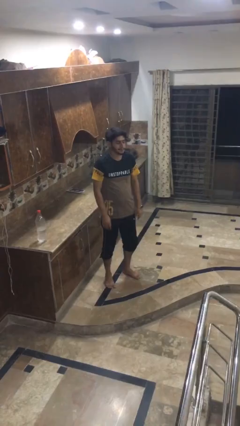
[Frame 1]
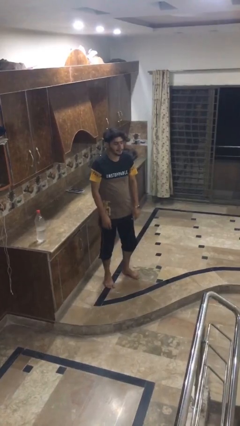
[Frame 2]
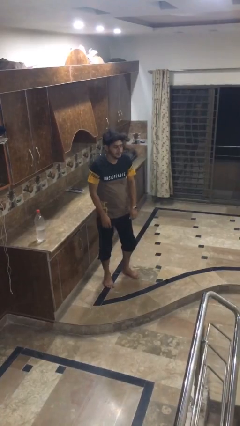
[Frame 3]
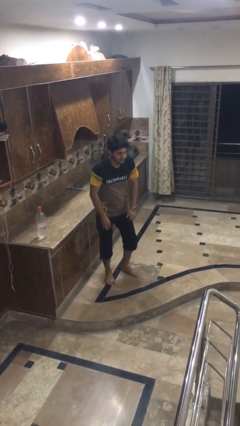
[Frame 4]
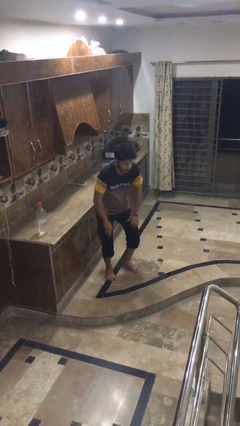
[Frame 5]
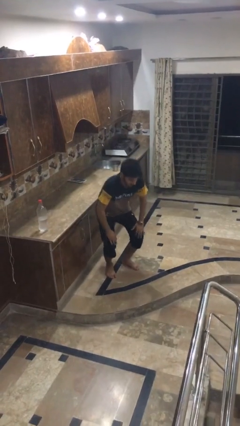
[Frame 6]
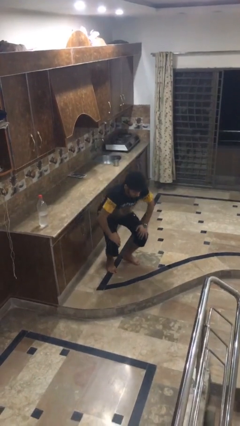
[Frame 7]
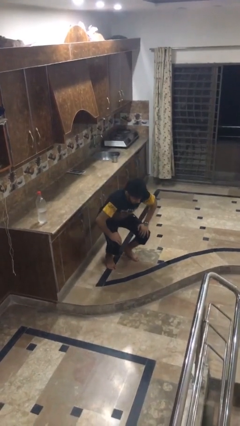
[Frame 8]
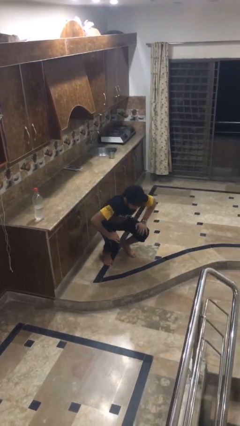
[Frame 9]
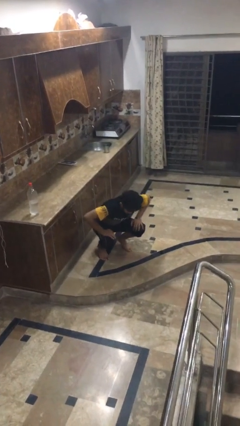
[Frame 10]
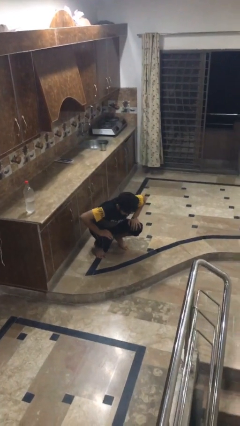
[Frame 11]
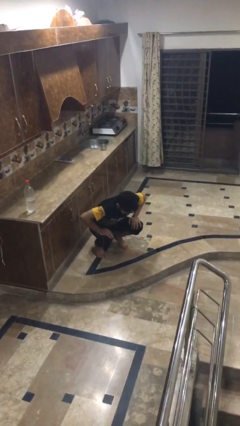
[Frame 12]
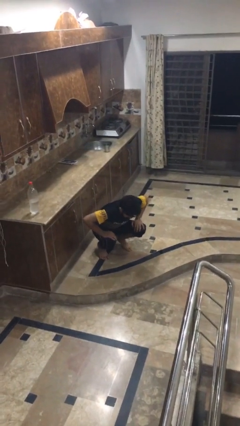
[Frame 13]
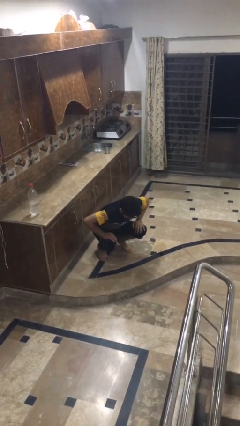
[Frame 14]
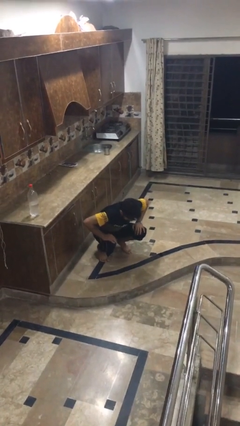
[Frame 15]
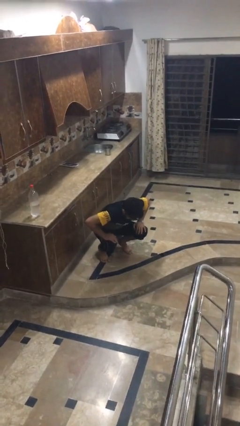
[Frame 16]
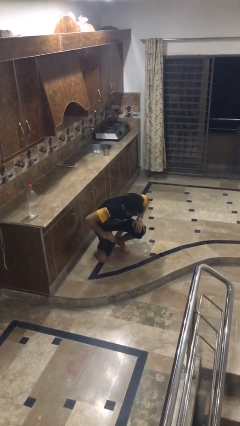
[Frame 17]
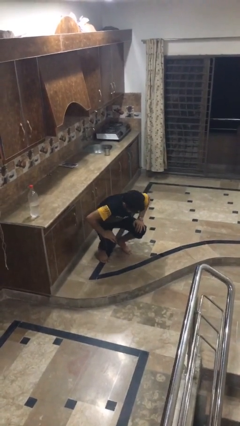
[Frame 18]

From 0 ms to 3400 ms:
person squats

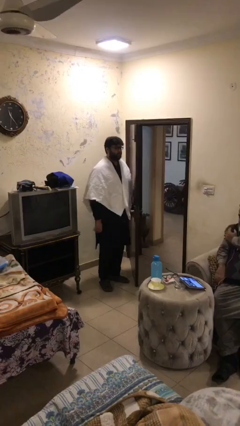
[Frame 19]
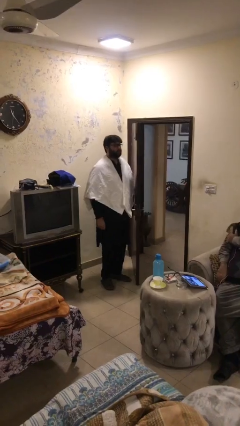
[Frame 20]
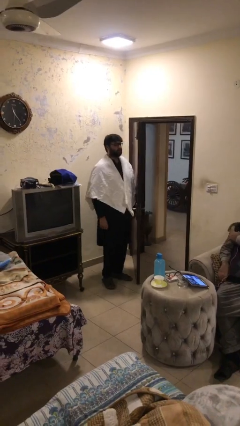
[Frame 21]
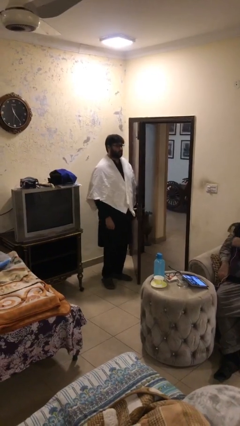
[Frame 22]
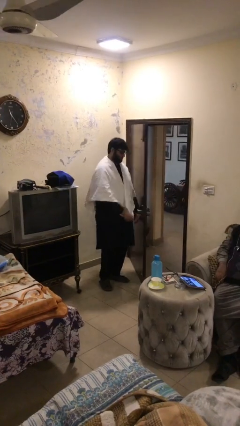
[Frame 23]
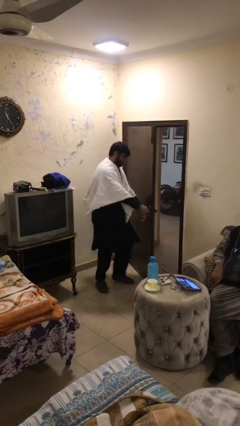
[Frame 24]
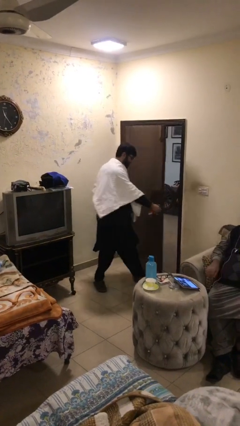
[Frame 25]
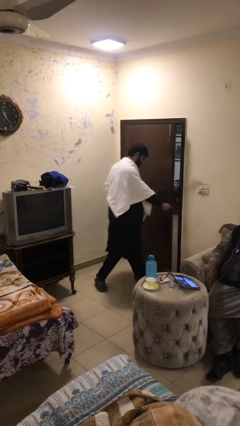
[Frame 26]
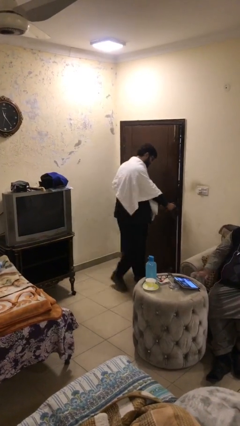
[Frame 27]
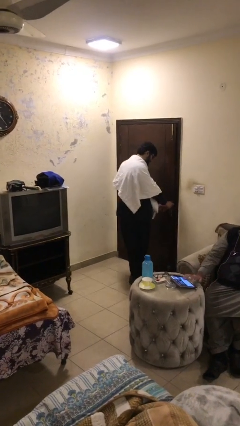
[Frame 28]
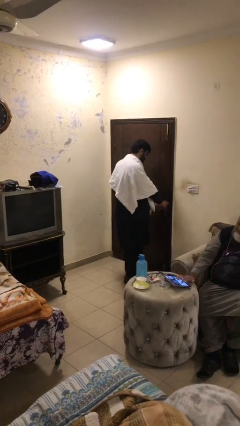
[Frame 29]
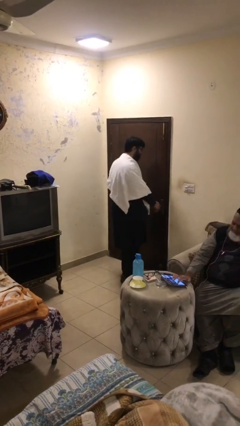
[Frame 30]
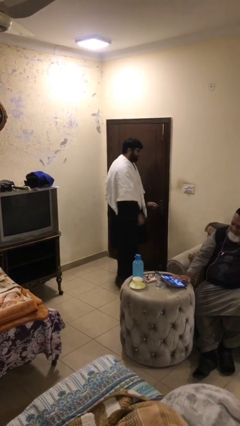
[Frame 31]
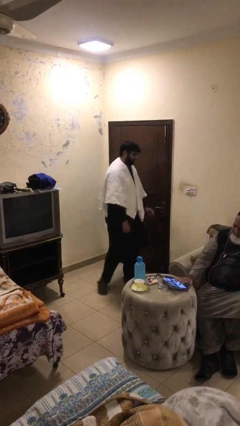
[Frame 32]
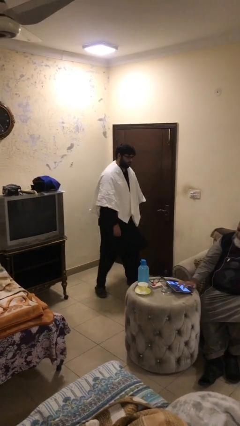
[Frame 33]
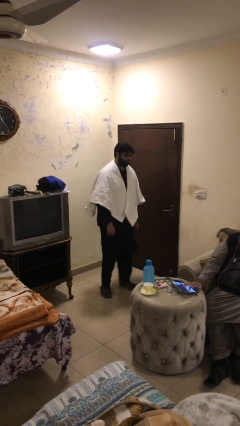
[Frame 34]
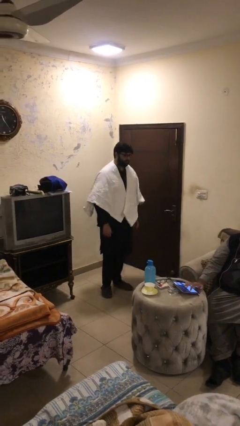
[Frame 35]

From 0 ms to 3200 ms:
person closes facility door

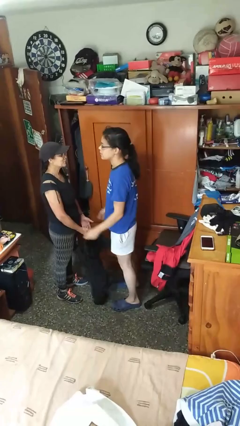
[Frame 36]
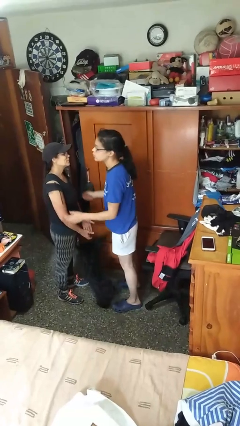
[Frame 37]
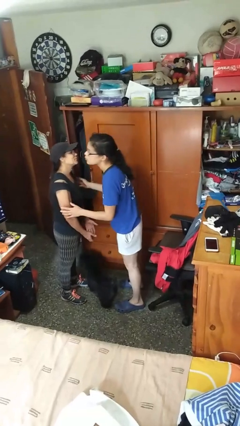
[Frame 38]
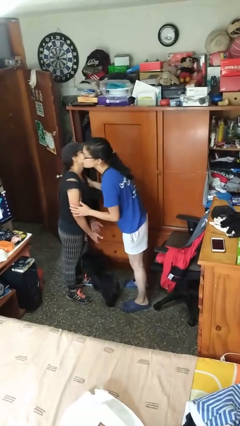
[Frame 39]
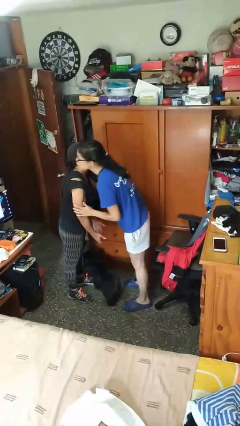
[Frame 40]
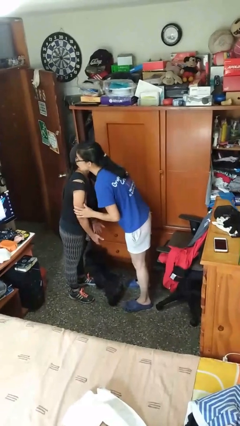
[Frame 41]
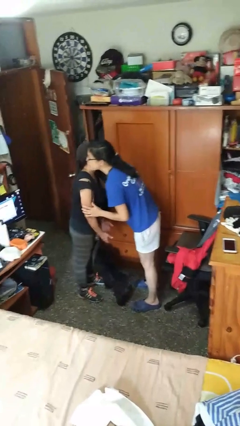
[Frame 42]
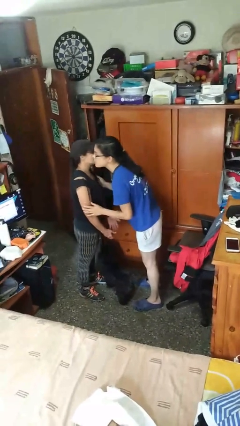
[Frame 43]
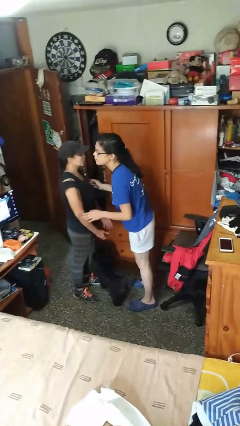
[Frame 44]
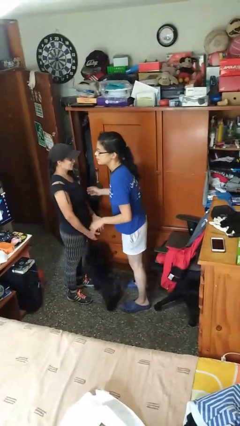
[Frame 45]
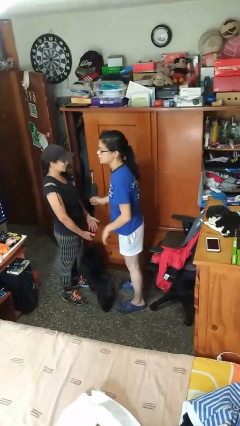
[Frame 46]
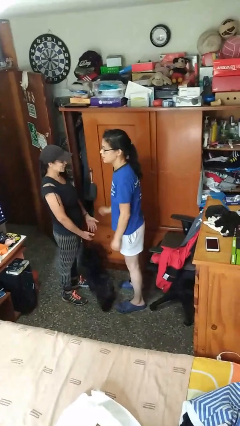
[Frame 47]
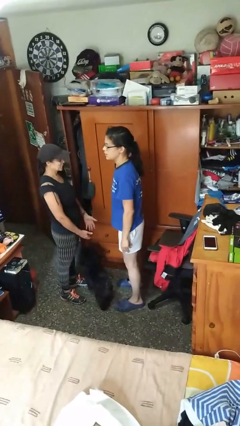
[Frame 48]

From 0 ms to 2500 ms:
person kisses cheek of person

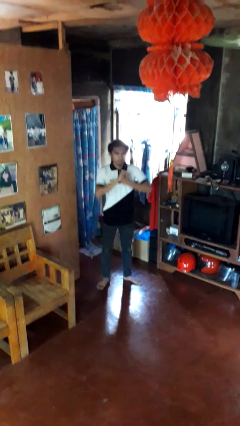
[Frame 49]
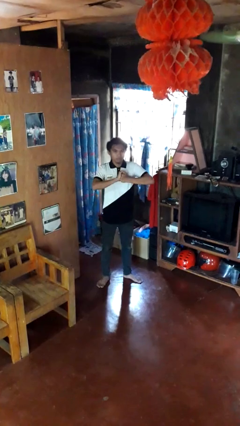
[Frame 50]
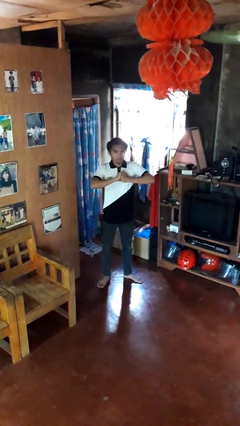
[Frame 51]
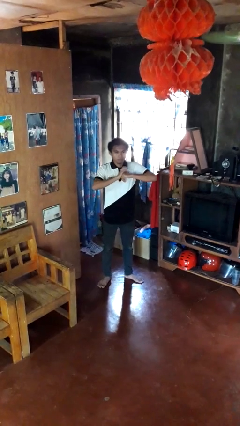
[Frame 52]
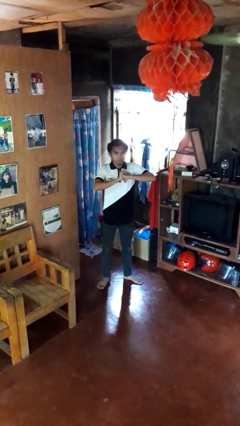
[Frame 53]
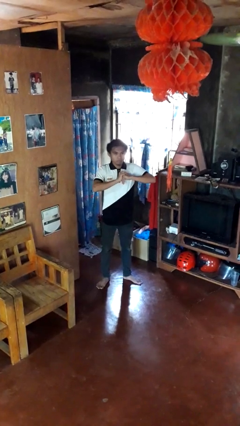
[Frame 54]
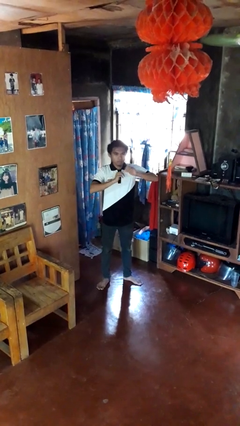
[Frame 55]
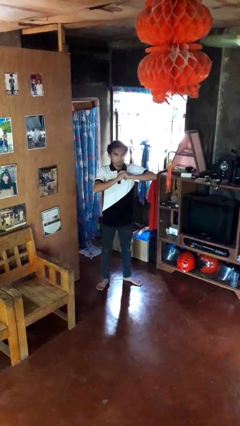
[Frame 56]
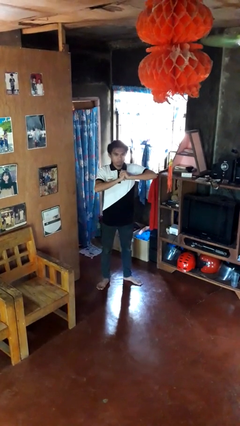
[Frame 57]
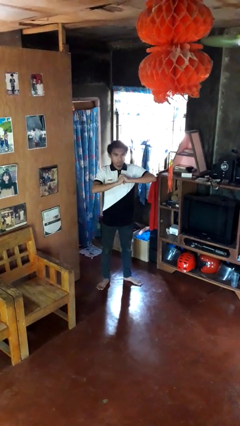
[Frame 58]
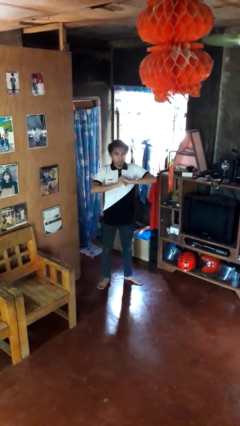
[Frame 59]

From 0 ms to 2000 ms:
person cracks knuckles

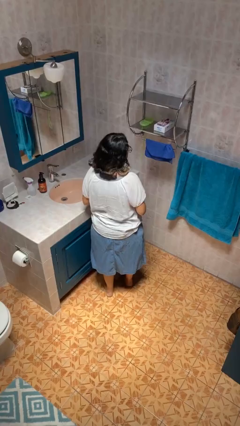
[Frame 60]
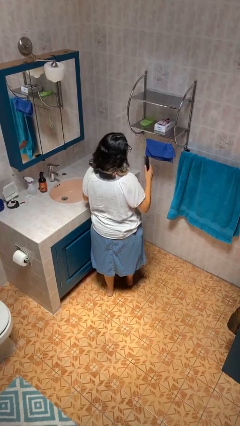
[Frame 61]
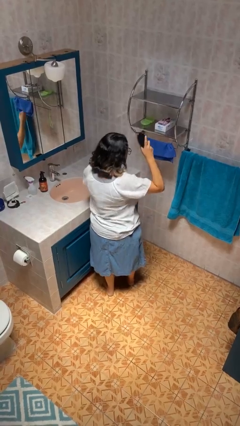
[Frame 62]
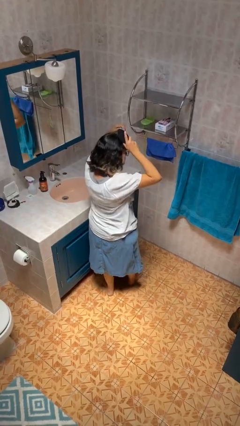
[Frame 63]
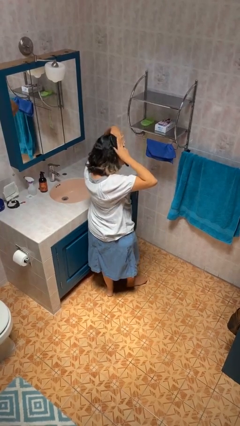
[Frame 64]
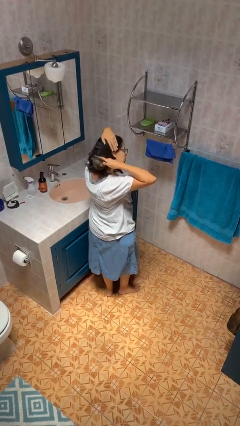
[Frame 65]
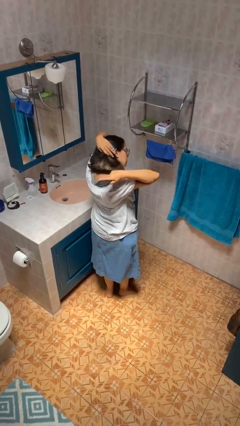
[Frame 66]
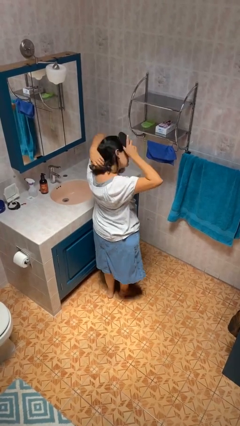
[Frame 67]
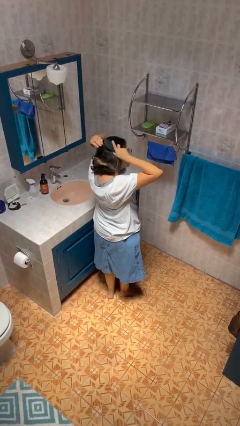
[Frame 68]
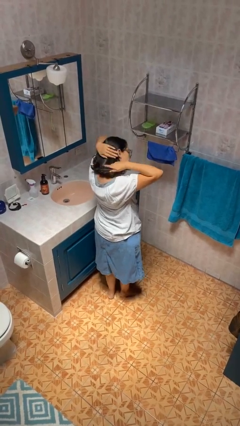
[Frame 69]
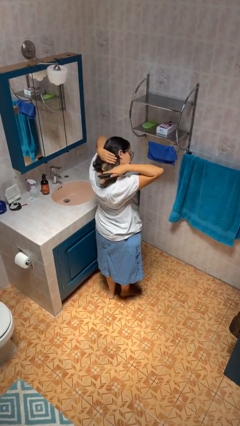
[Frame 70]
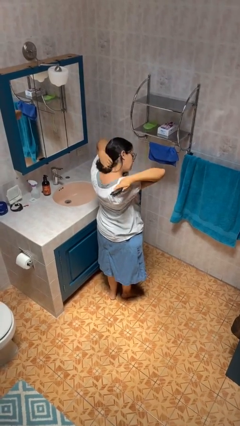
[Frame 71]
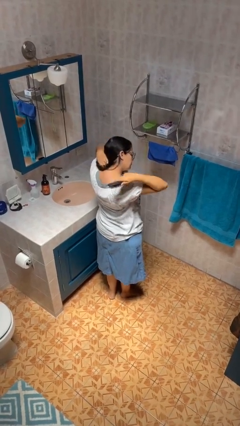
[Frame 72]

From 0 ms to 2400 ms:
person brushes hair

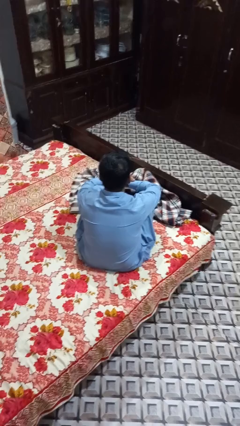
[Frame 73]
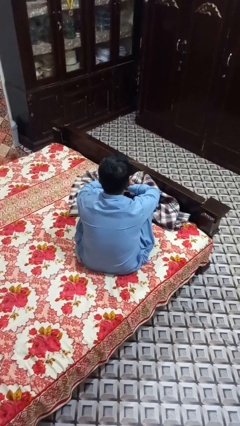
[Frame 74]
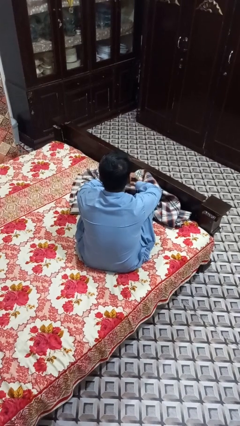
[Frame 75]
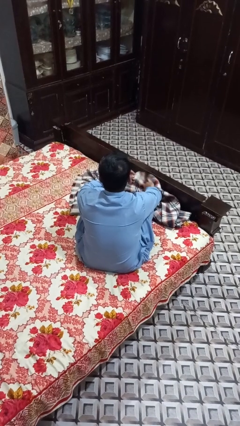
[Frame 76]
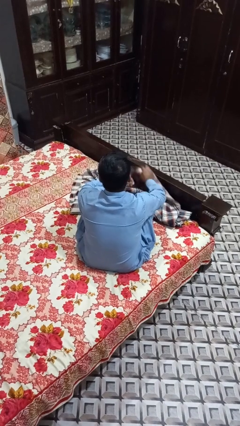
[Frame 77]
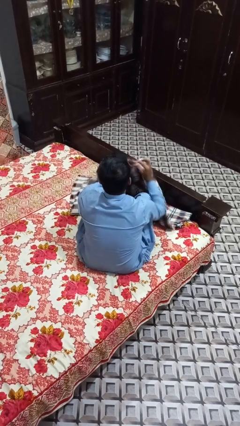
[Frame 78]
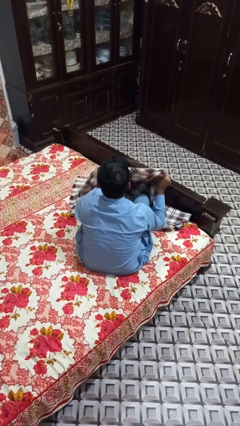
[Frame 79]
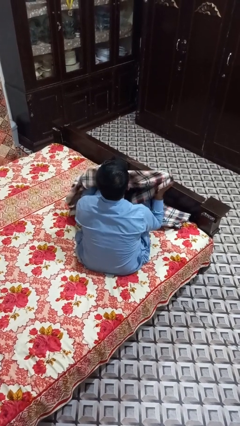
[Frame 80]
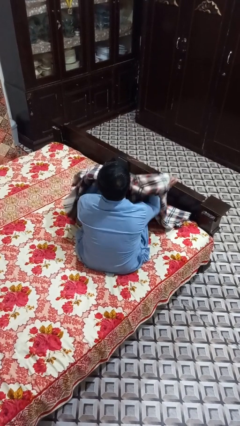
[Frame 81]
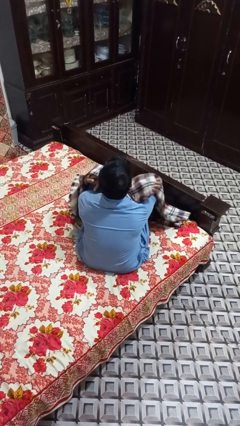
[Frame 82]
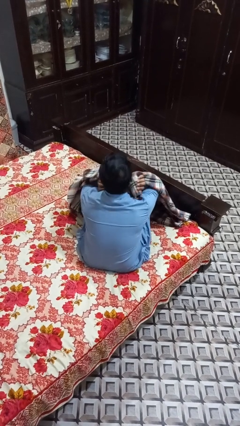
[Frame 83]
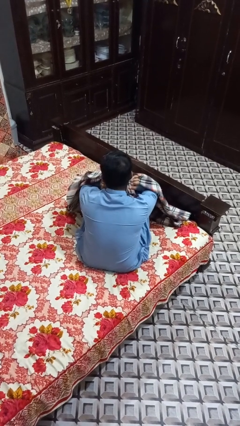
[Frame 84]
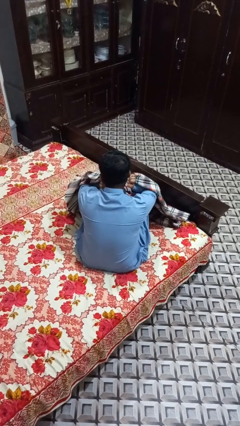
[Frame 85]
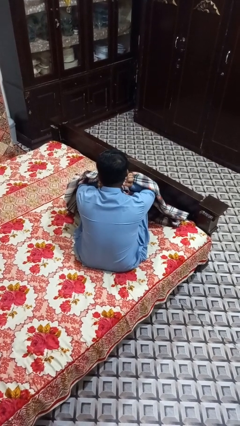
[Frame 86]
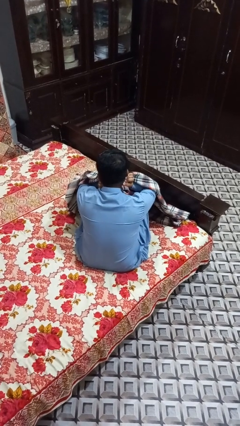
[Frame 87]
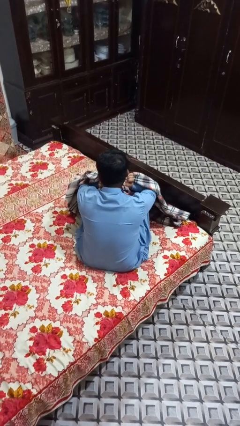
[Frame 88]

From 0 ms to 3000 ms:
person covers with blanket

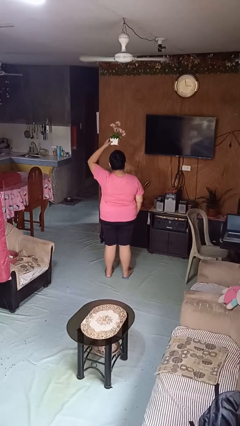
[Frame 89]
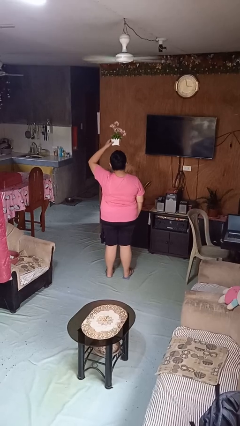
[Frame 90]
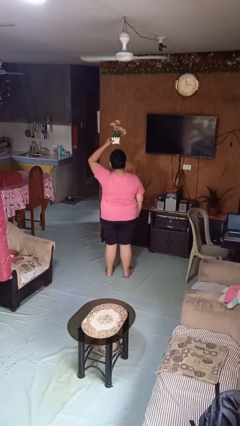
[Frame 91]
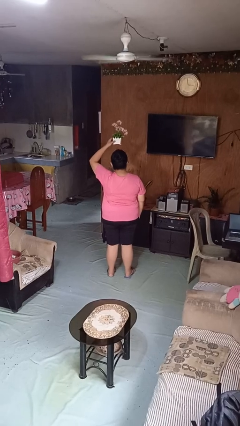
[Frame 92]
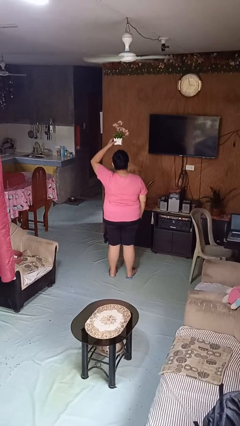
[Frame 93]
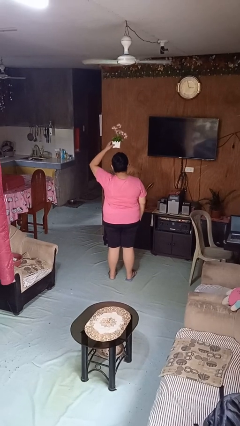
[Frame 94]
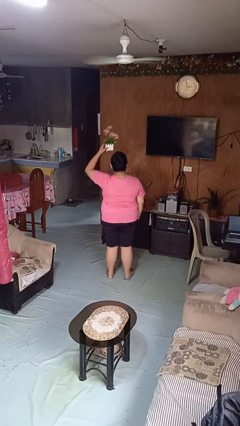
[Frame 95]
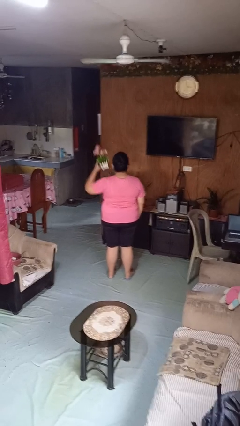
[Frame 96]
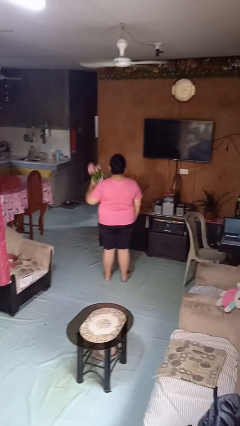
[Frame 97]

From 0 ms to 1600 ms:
person holds object above head
